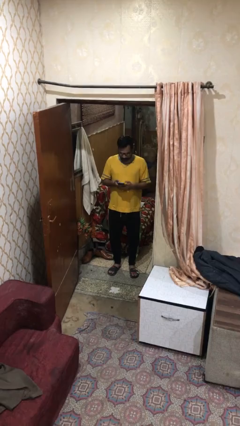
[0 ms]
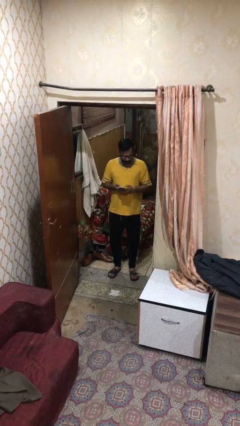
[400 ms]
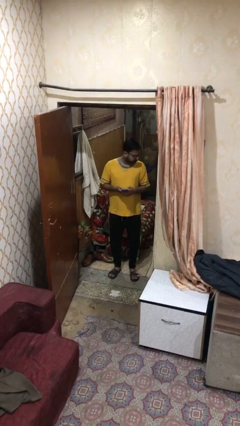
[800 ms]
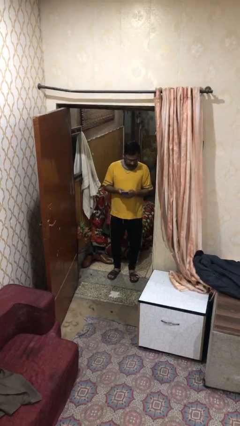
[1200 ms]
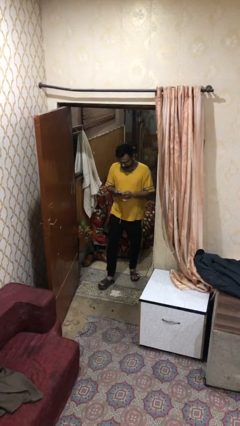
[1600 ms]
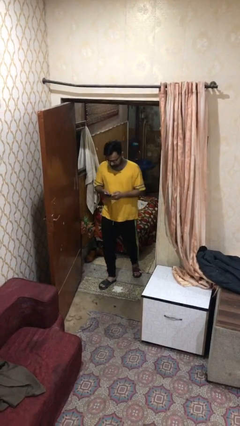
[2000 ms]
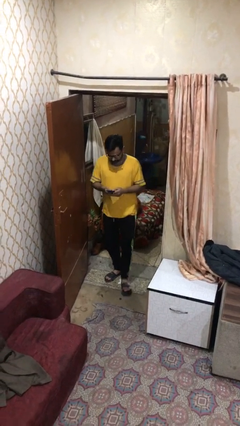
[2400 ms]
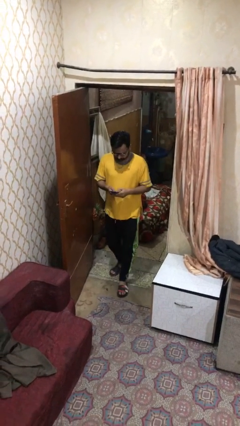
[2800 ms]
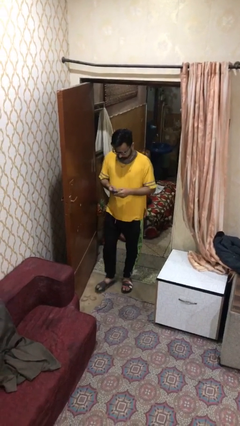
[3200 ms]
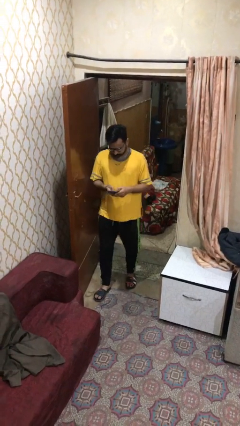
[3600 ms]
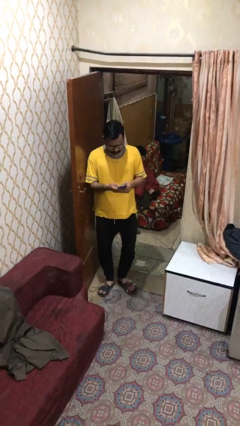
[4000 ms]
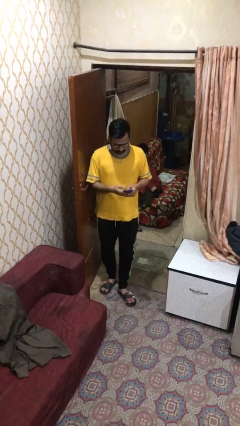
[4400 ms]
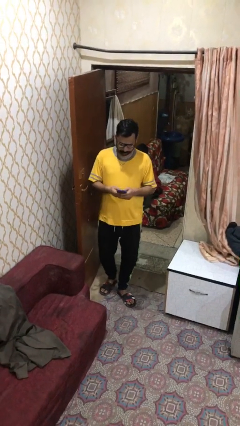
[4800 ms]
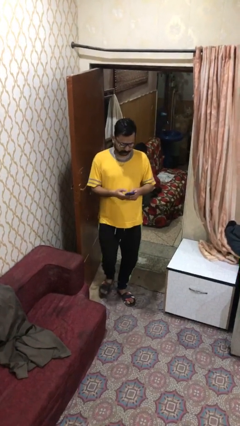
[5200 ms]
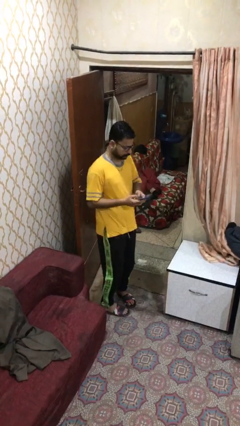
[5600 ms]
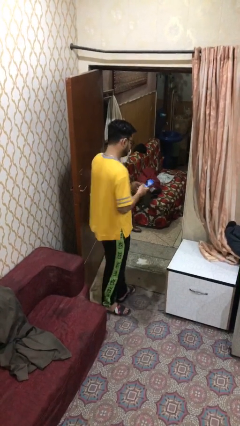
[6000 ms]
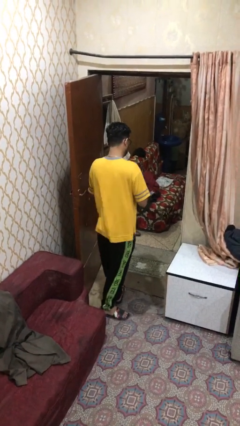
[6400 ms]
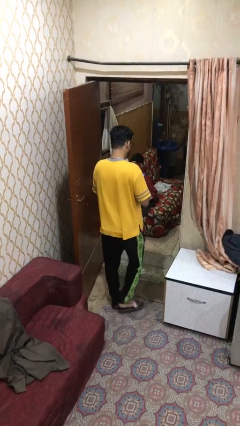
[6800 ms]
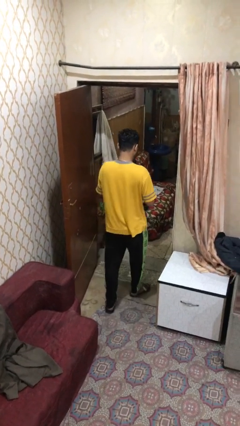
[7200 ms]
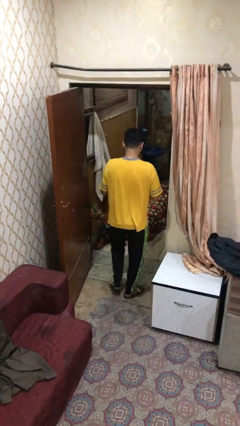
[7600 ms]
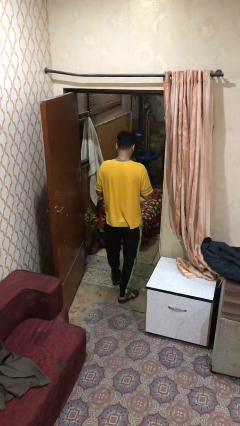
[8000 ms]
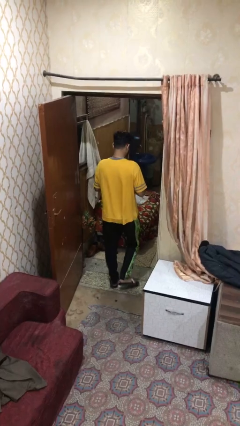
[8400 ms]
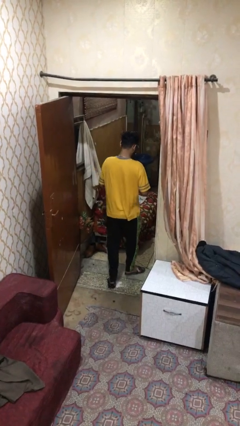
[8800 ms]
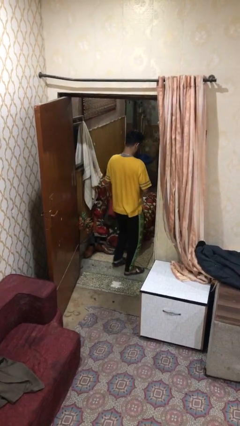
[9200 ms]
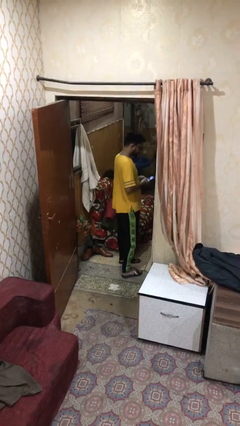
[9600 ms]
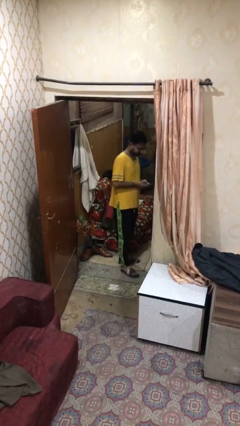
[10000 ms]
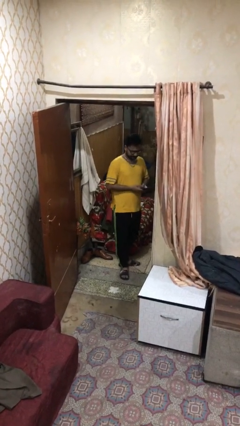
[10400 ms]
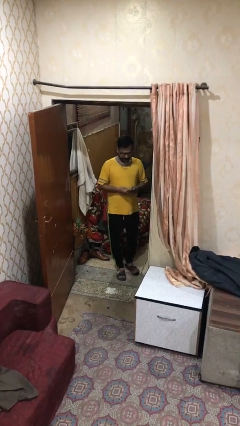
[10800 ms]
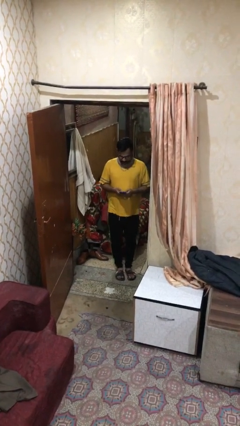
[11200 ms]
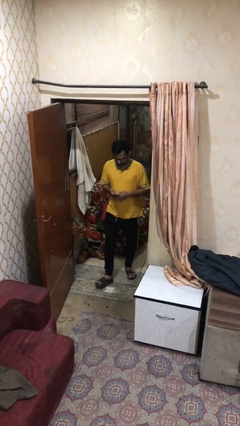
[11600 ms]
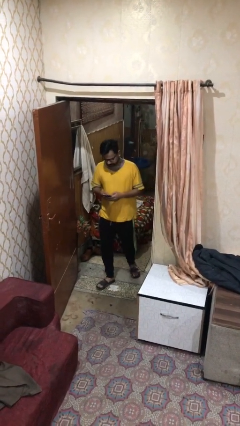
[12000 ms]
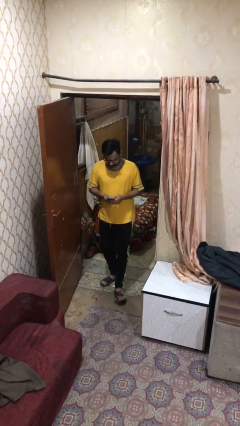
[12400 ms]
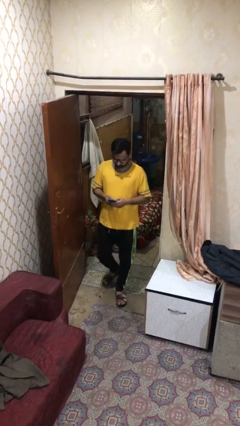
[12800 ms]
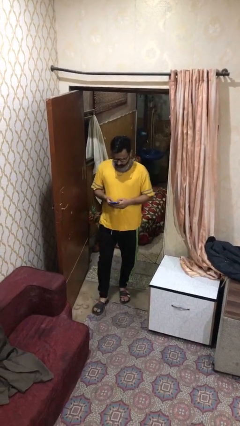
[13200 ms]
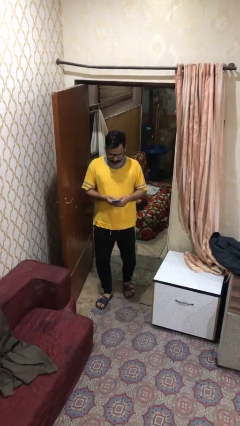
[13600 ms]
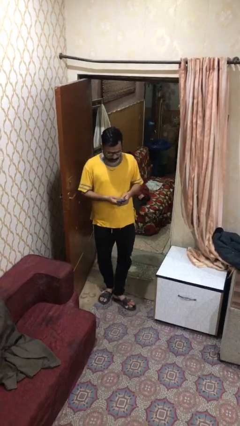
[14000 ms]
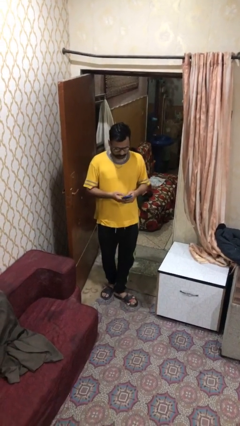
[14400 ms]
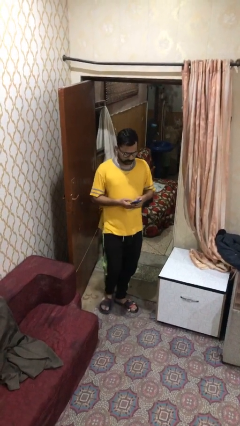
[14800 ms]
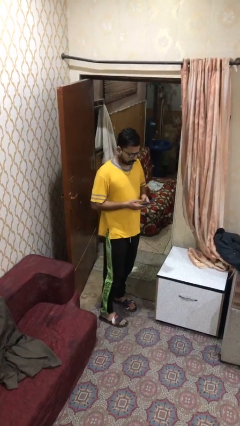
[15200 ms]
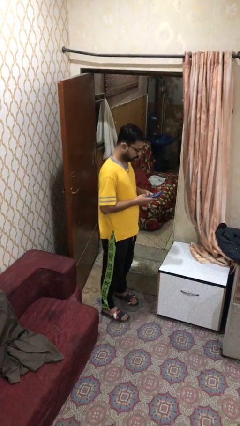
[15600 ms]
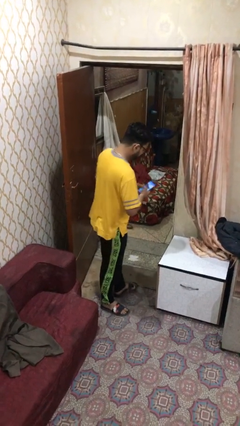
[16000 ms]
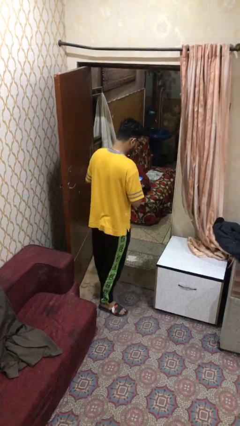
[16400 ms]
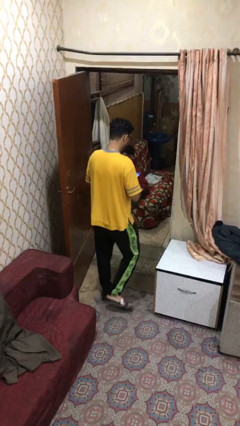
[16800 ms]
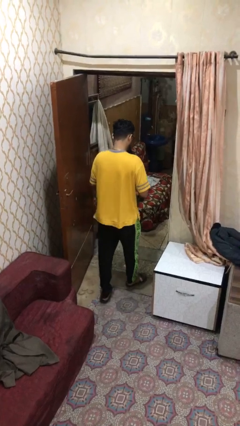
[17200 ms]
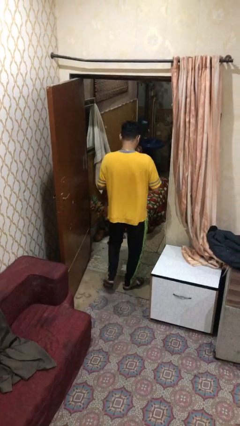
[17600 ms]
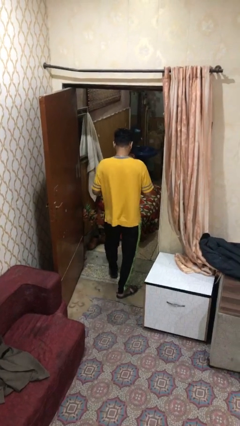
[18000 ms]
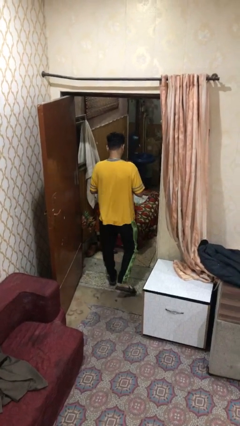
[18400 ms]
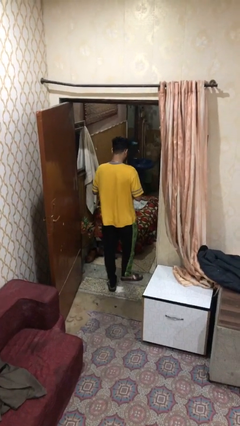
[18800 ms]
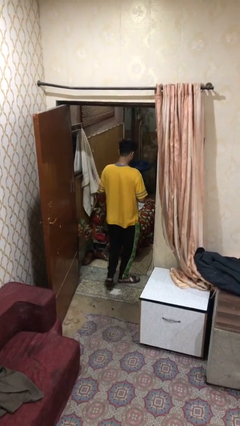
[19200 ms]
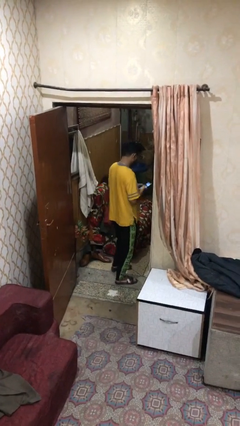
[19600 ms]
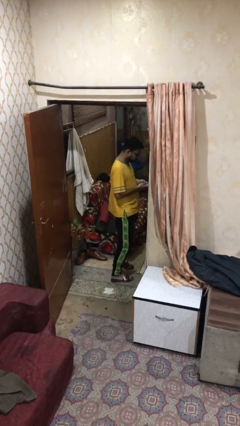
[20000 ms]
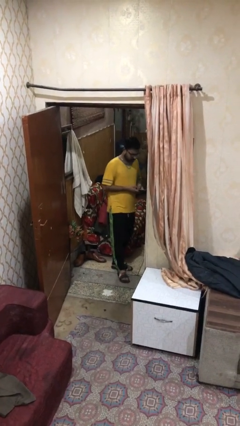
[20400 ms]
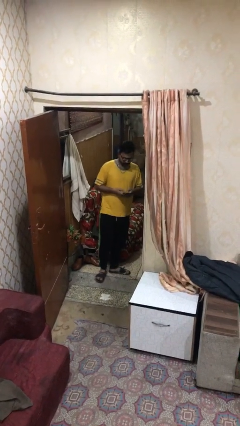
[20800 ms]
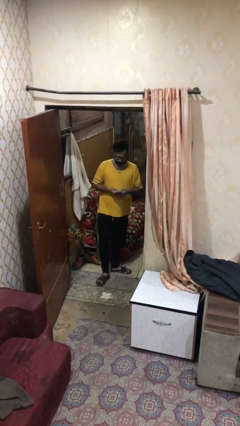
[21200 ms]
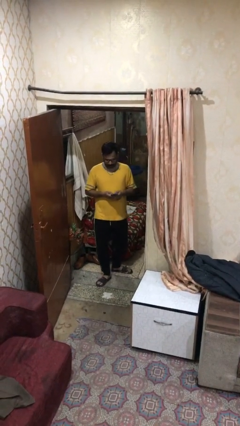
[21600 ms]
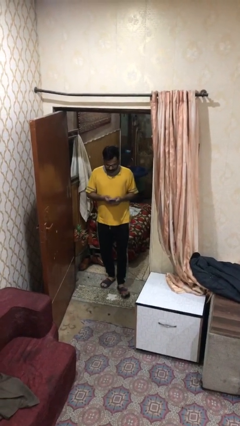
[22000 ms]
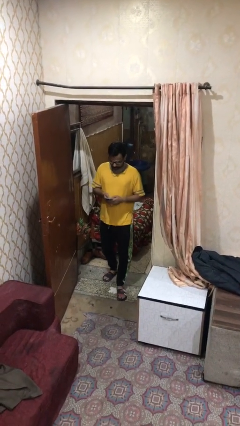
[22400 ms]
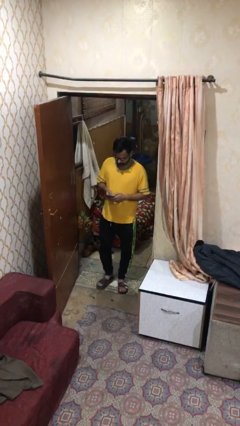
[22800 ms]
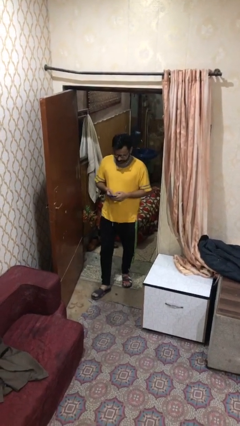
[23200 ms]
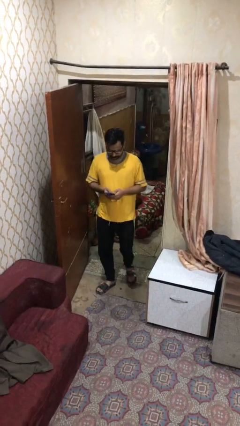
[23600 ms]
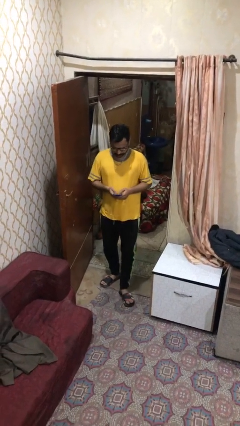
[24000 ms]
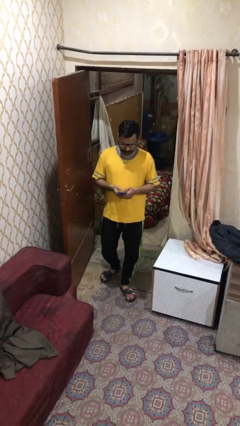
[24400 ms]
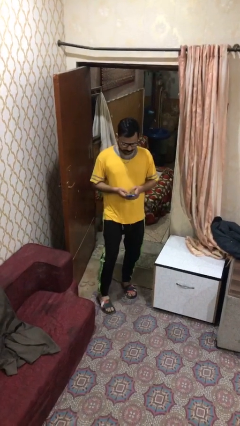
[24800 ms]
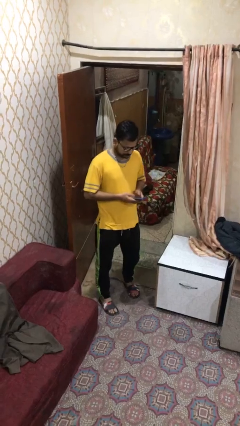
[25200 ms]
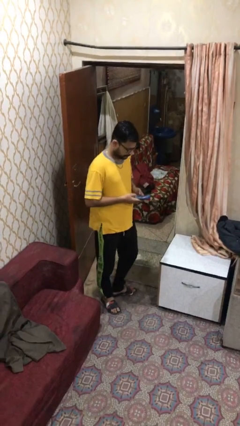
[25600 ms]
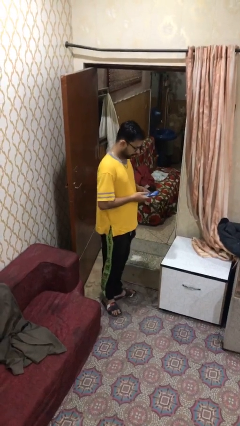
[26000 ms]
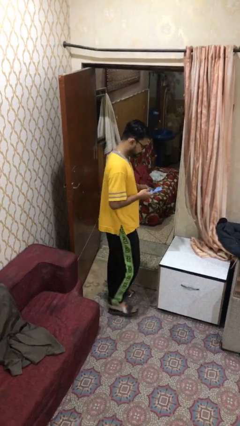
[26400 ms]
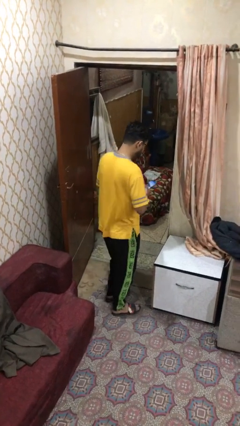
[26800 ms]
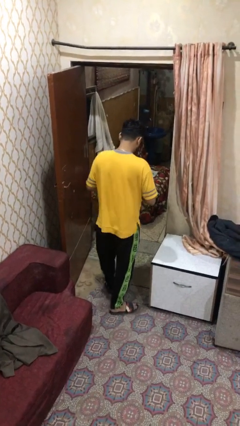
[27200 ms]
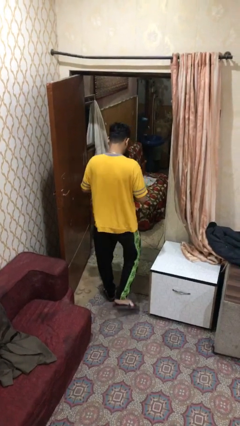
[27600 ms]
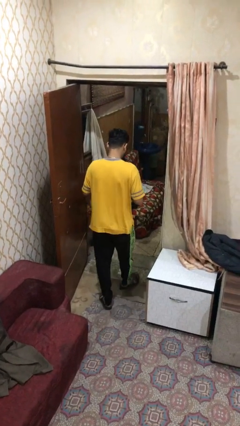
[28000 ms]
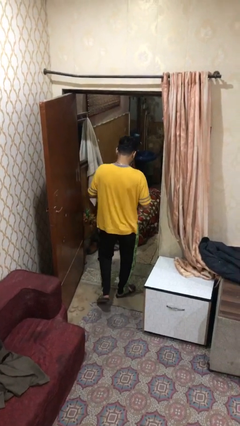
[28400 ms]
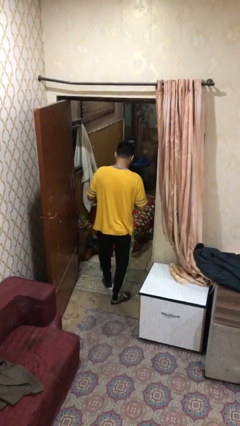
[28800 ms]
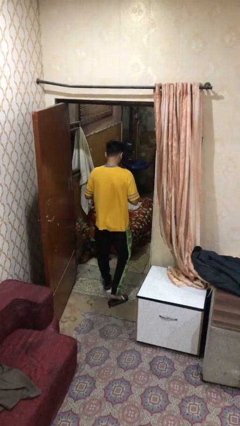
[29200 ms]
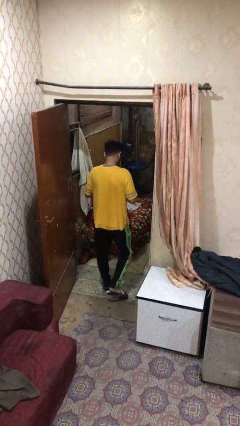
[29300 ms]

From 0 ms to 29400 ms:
person texts on phone

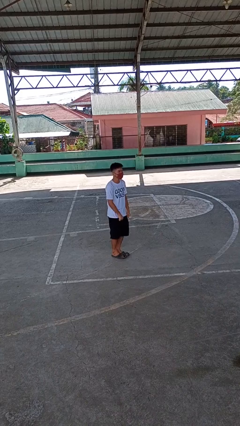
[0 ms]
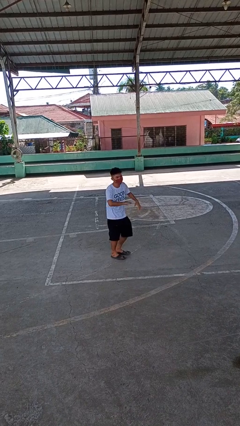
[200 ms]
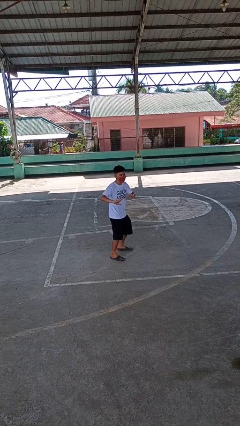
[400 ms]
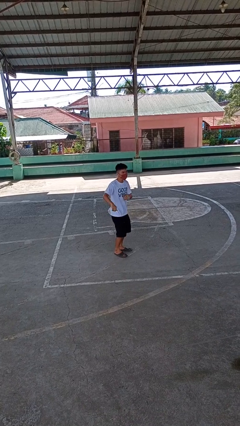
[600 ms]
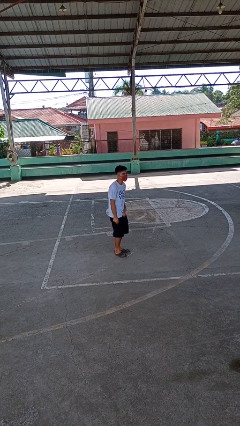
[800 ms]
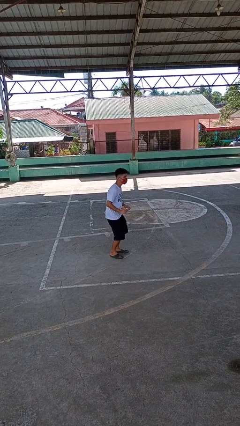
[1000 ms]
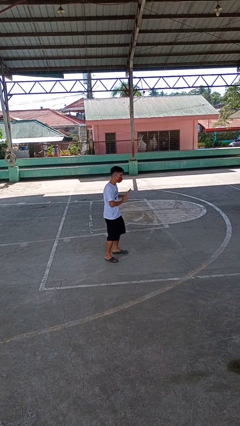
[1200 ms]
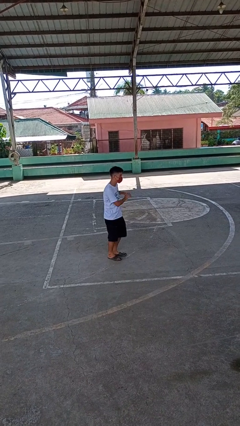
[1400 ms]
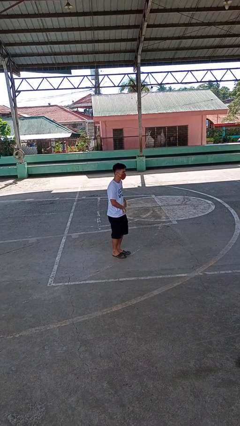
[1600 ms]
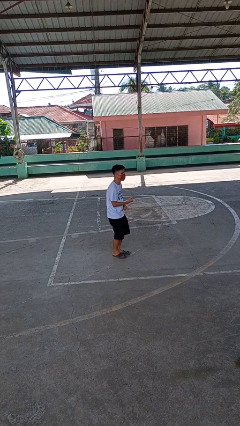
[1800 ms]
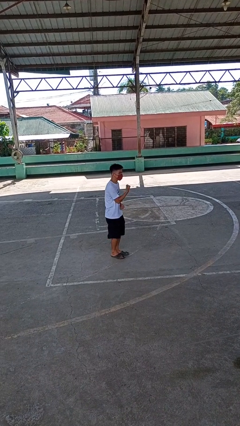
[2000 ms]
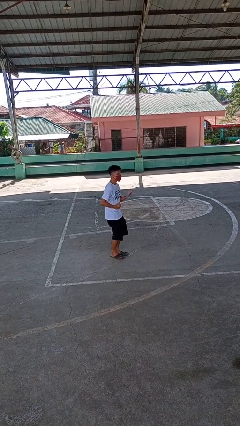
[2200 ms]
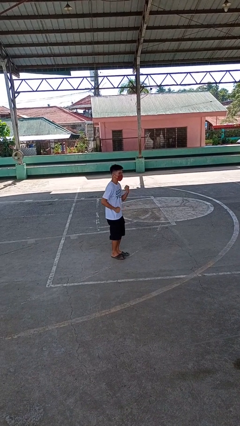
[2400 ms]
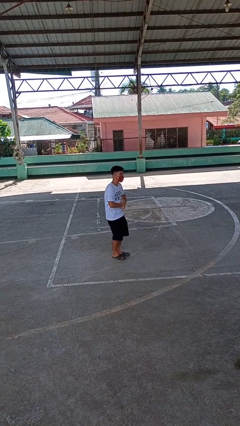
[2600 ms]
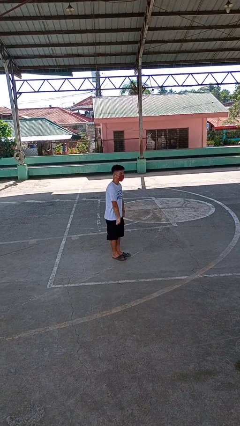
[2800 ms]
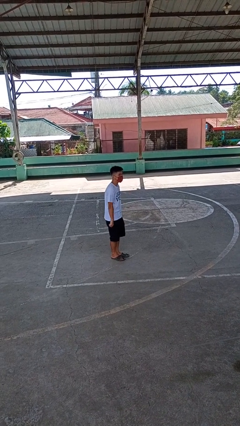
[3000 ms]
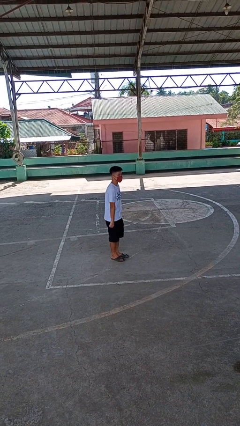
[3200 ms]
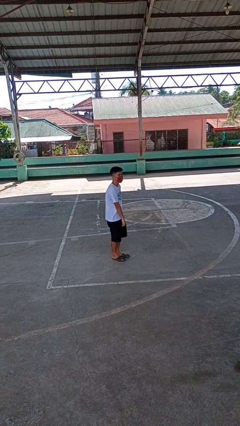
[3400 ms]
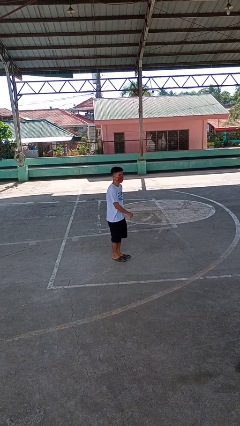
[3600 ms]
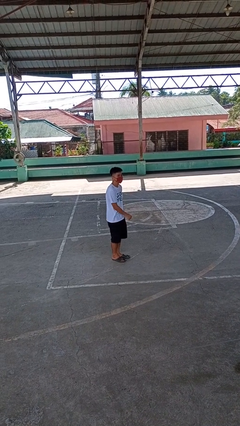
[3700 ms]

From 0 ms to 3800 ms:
person dances in place
